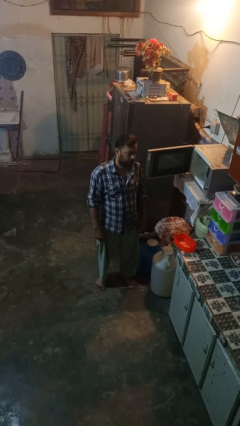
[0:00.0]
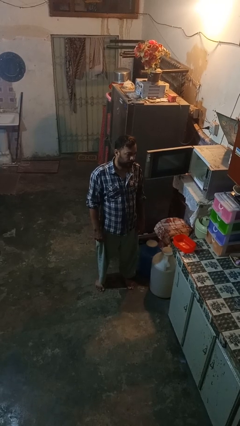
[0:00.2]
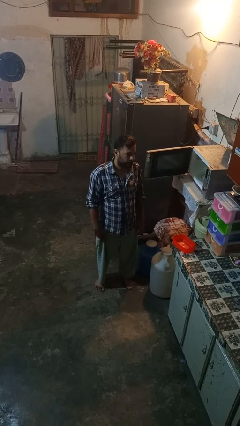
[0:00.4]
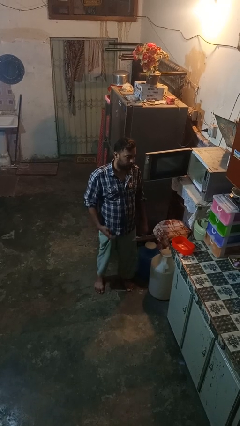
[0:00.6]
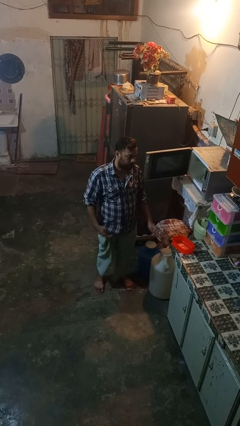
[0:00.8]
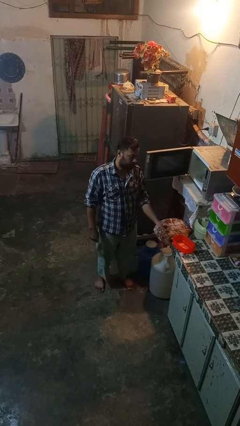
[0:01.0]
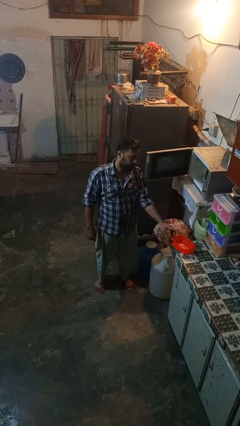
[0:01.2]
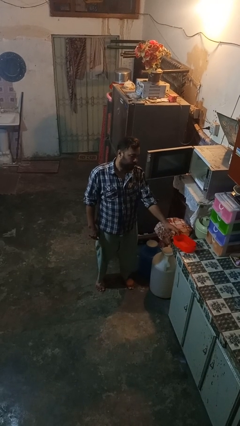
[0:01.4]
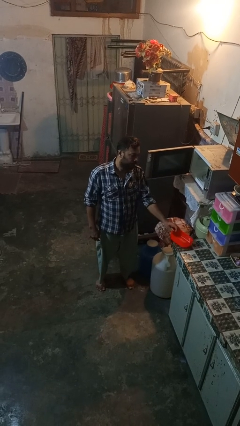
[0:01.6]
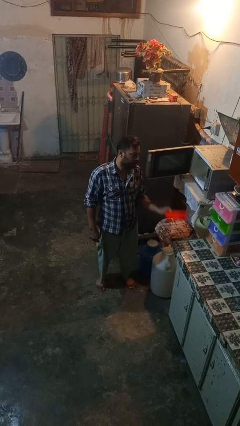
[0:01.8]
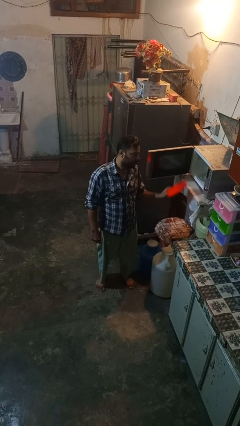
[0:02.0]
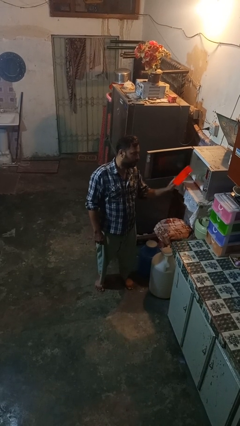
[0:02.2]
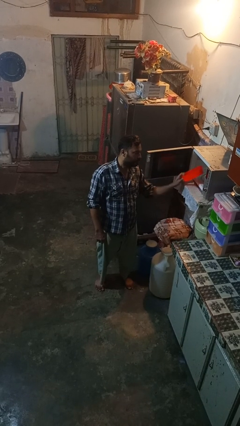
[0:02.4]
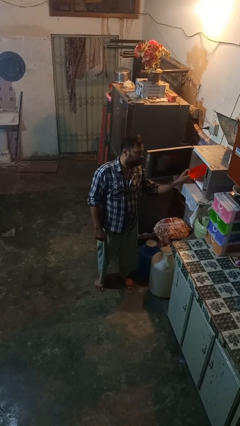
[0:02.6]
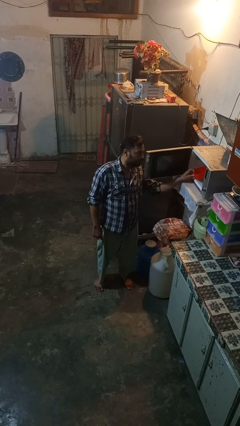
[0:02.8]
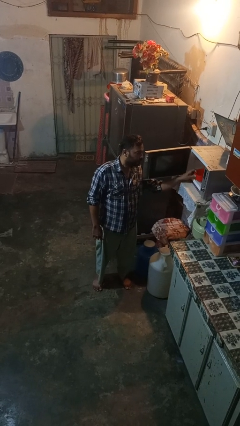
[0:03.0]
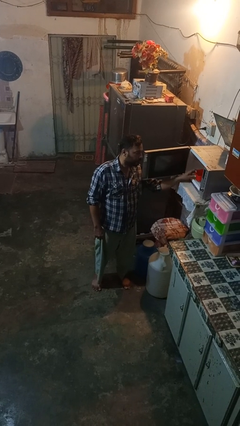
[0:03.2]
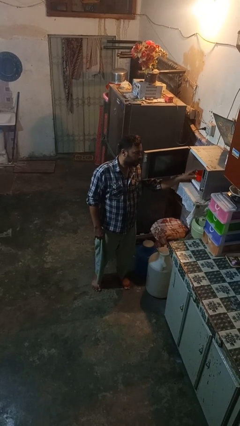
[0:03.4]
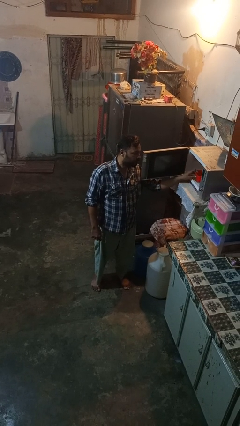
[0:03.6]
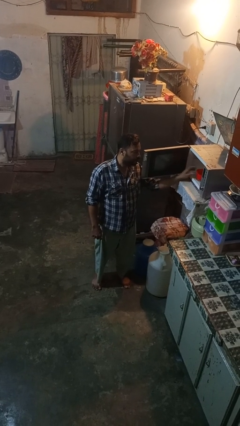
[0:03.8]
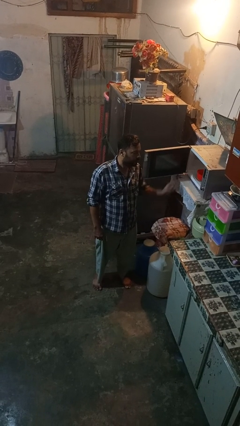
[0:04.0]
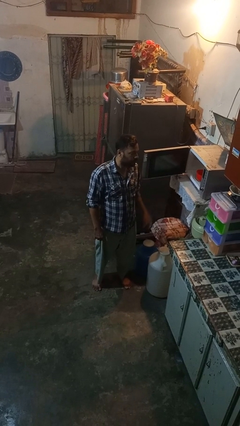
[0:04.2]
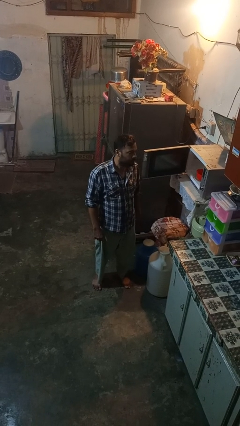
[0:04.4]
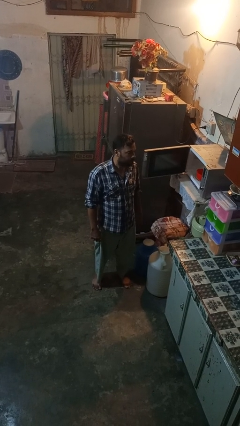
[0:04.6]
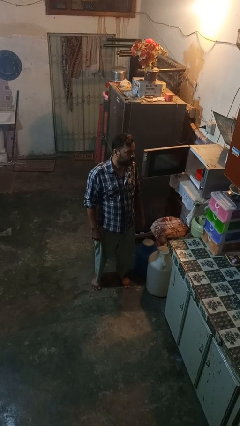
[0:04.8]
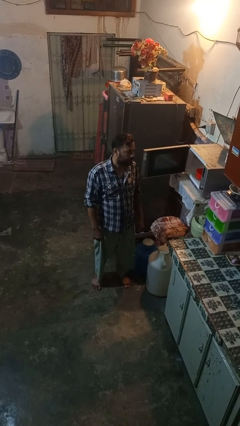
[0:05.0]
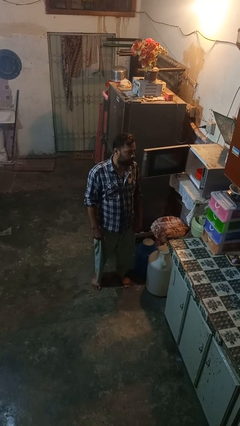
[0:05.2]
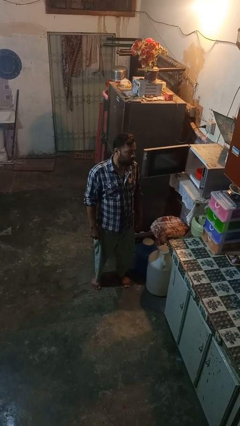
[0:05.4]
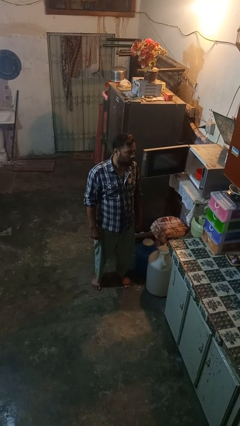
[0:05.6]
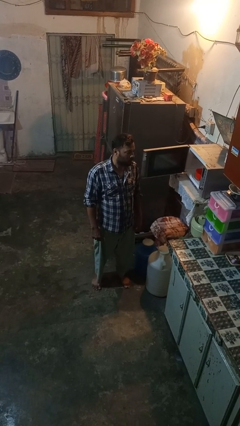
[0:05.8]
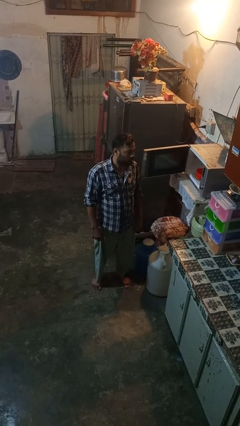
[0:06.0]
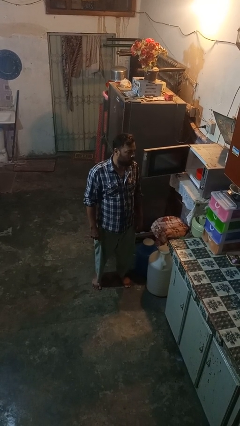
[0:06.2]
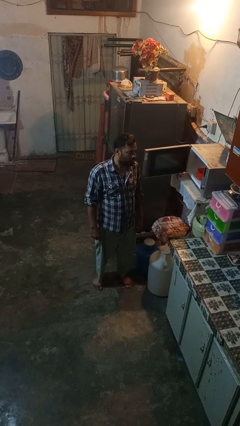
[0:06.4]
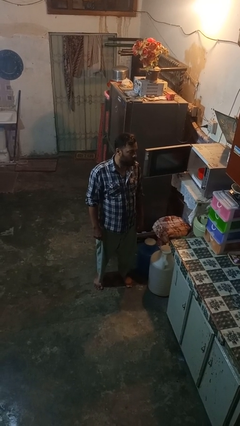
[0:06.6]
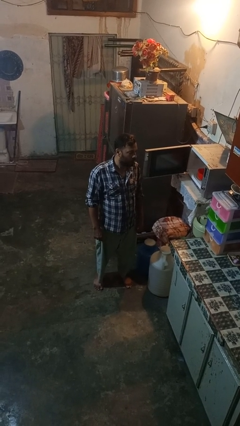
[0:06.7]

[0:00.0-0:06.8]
person puts object into microwave

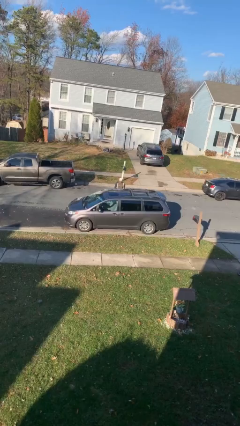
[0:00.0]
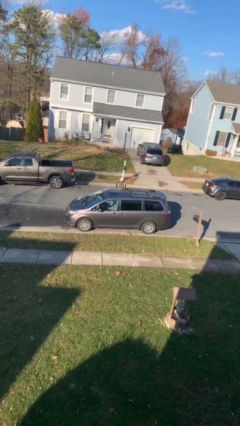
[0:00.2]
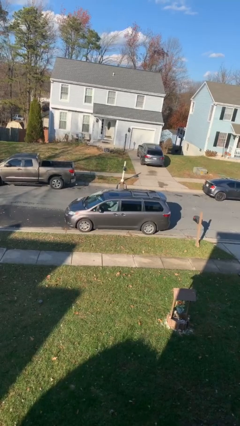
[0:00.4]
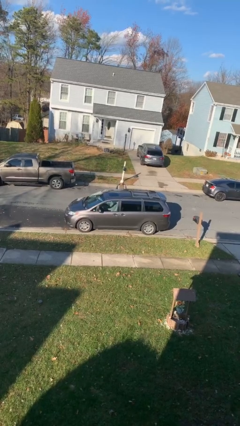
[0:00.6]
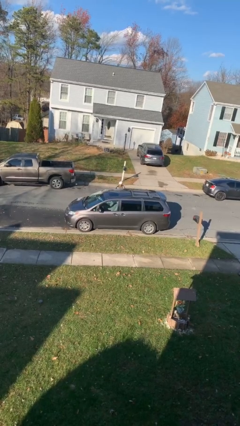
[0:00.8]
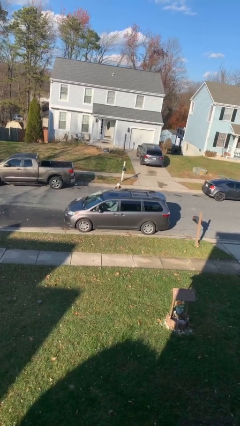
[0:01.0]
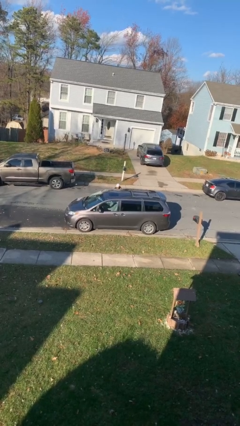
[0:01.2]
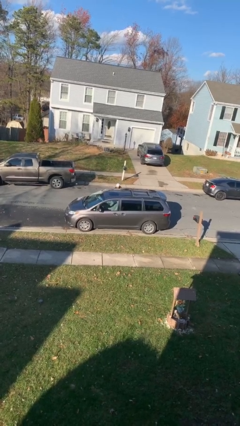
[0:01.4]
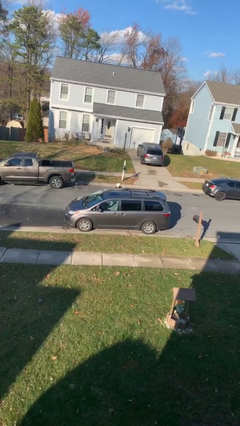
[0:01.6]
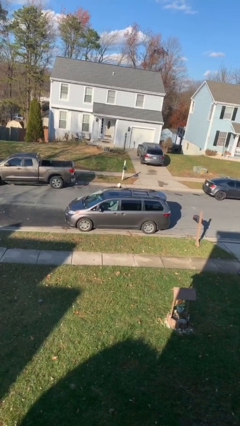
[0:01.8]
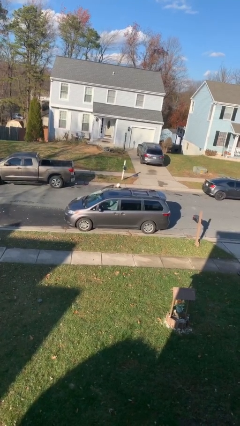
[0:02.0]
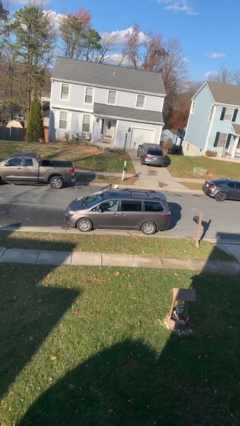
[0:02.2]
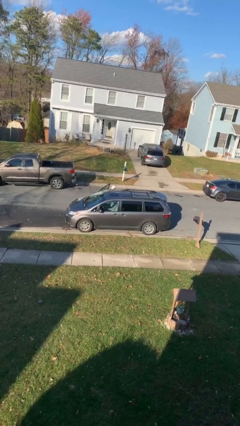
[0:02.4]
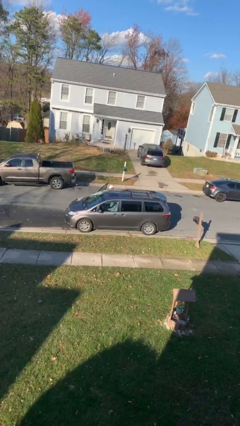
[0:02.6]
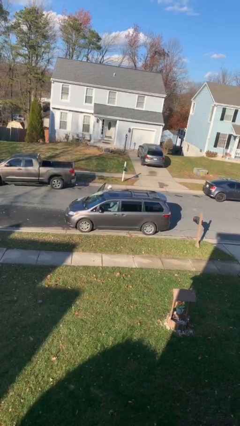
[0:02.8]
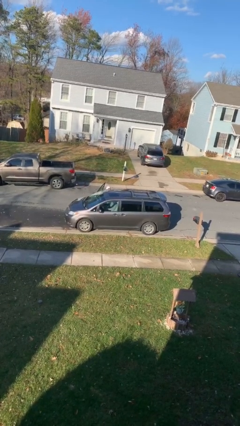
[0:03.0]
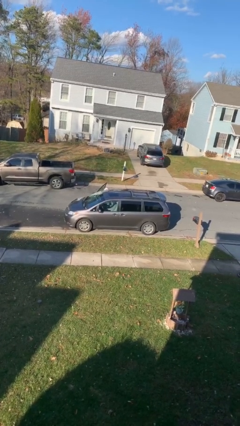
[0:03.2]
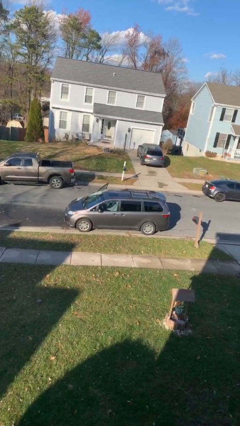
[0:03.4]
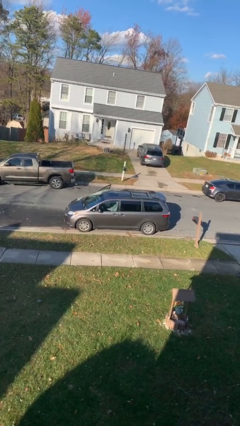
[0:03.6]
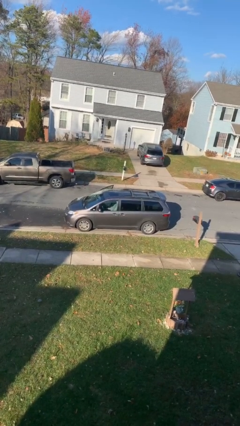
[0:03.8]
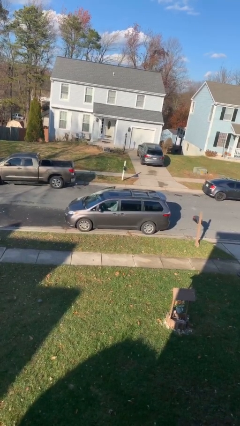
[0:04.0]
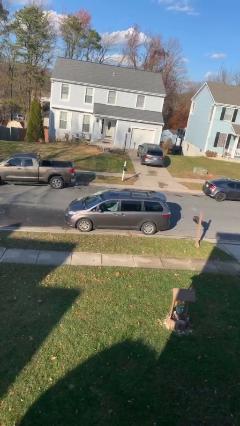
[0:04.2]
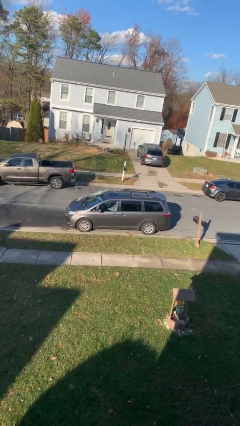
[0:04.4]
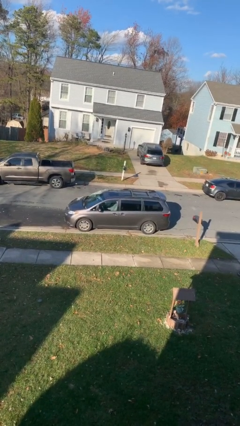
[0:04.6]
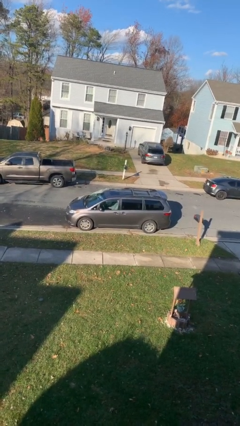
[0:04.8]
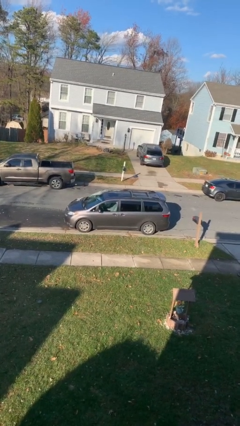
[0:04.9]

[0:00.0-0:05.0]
car picks up person

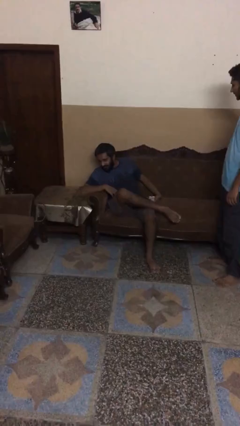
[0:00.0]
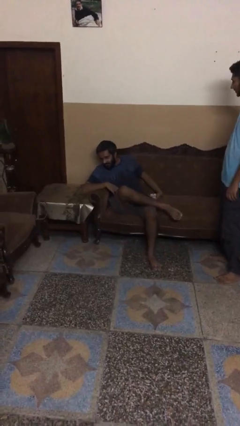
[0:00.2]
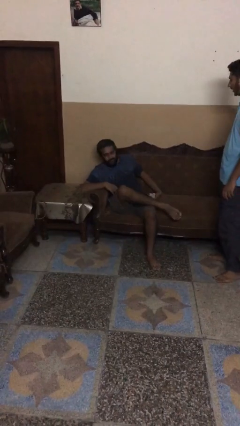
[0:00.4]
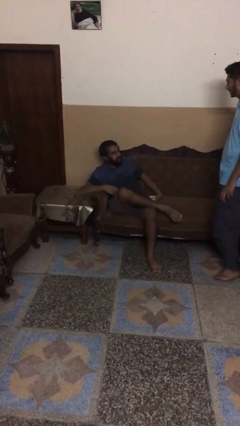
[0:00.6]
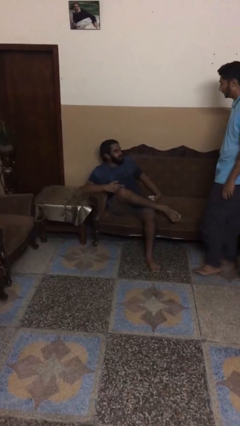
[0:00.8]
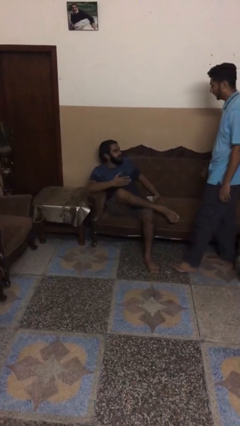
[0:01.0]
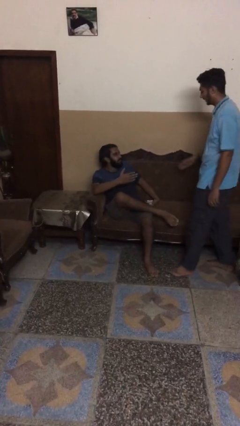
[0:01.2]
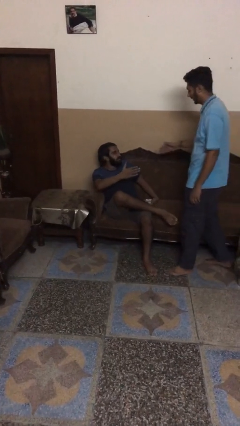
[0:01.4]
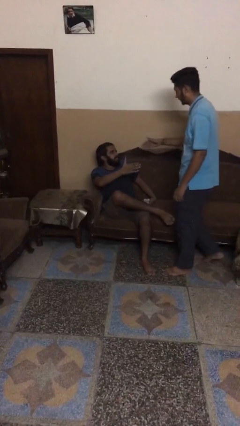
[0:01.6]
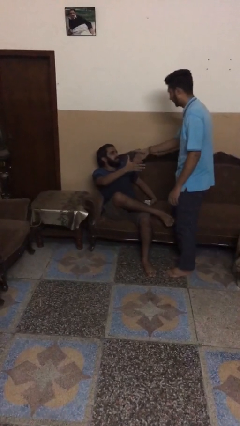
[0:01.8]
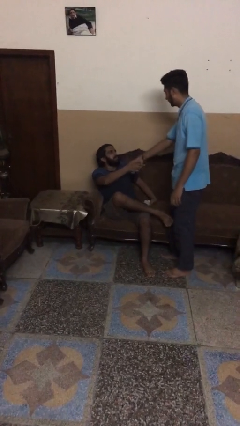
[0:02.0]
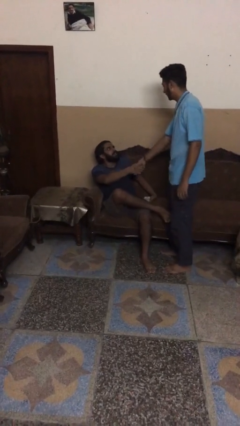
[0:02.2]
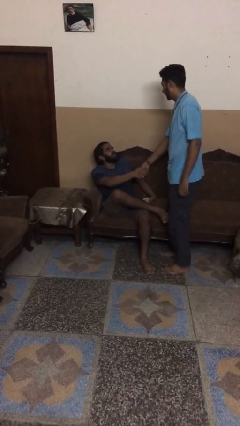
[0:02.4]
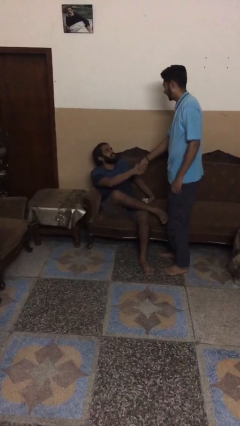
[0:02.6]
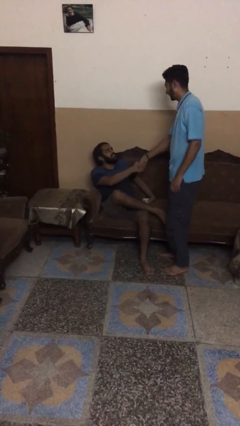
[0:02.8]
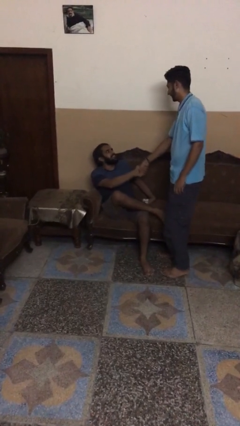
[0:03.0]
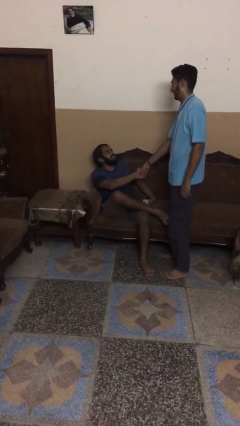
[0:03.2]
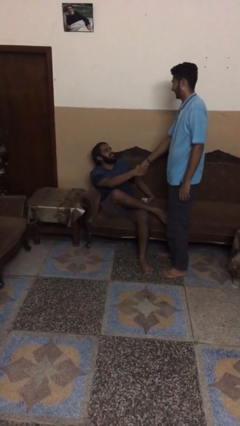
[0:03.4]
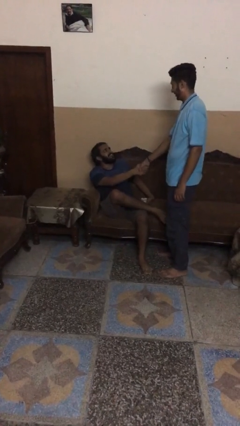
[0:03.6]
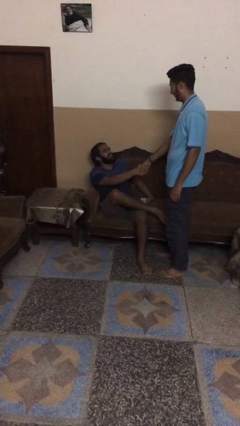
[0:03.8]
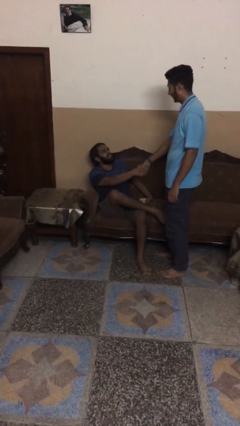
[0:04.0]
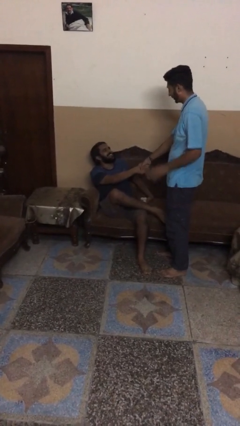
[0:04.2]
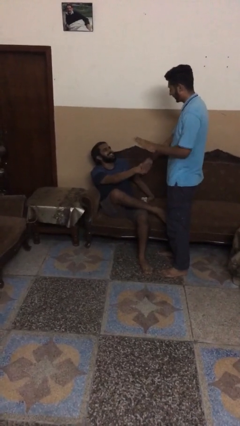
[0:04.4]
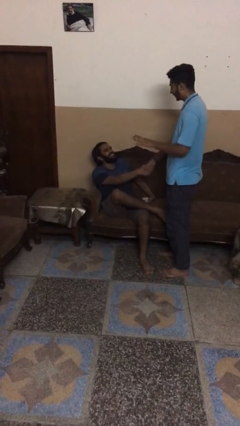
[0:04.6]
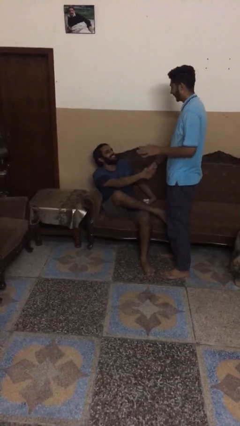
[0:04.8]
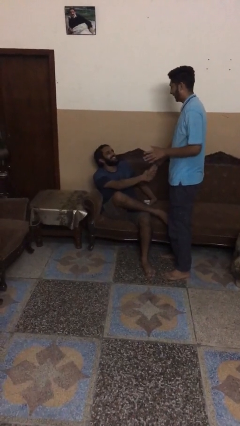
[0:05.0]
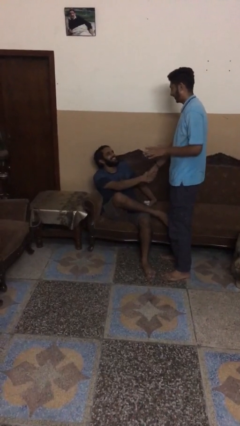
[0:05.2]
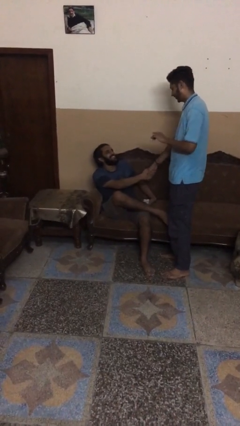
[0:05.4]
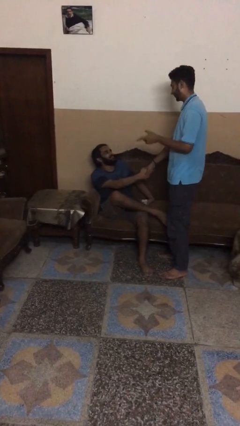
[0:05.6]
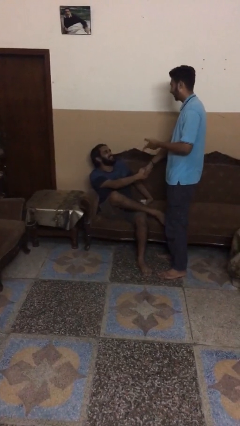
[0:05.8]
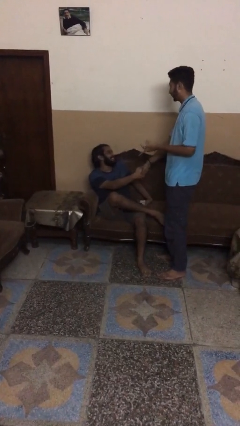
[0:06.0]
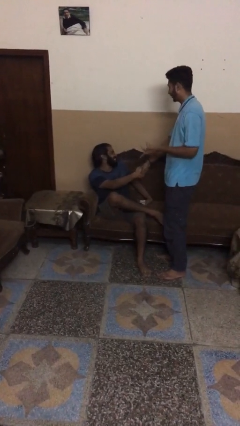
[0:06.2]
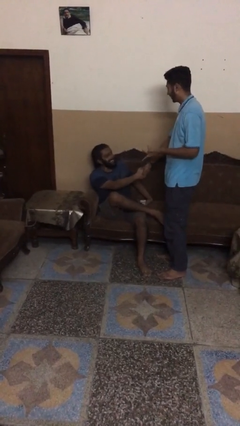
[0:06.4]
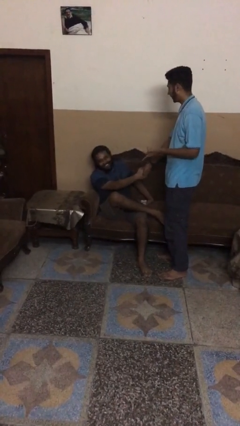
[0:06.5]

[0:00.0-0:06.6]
person shakes hand
